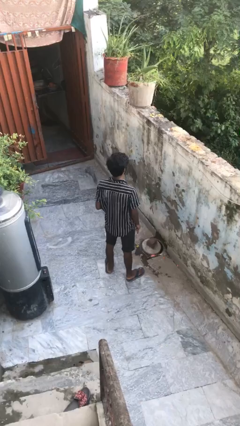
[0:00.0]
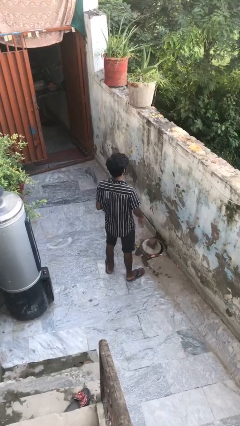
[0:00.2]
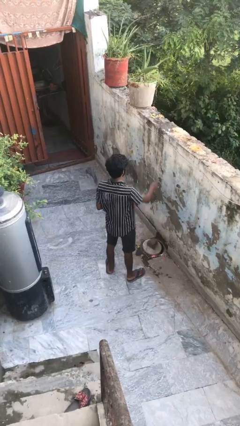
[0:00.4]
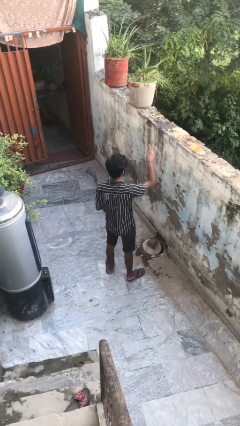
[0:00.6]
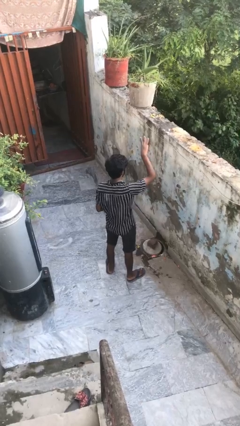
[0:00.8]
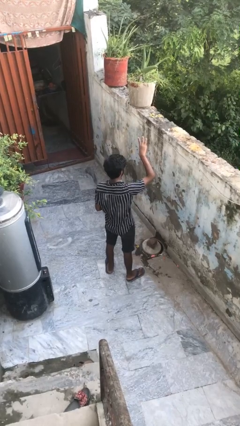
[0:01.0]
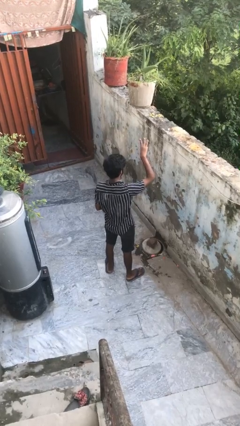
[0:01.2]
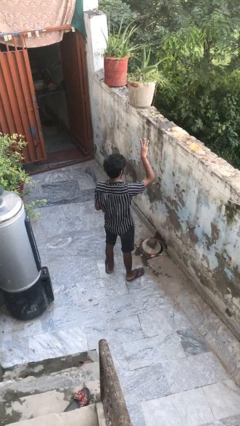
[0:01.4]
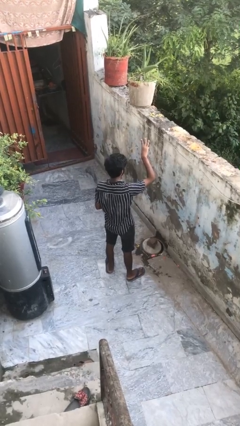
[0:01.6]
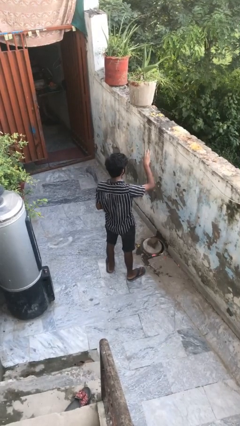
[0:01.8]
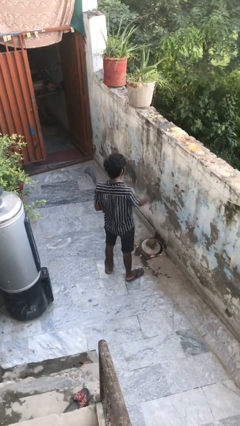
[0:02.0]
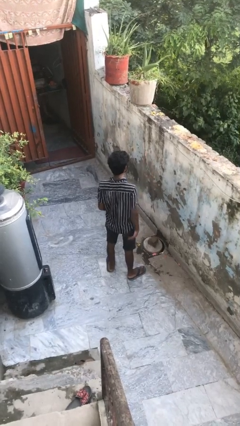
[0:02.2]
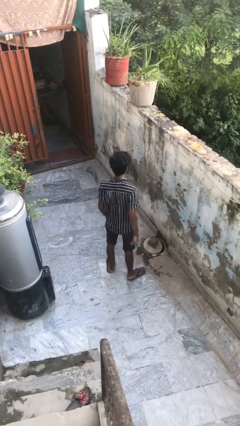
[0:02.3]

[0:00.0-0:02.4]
person gestures number three

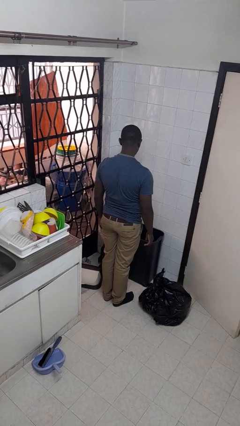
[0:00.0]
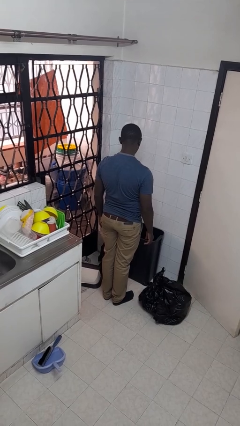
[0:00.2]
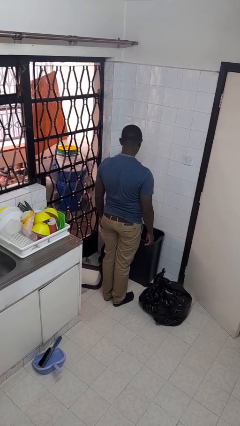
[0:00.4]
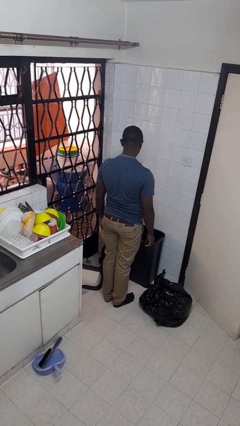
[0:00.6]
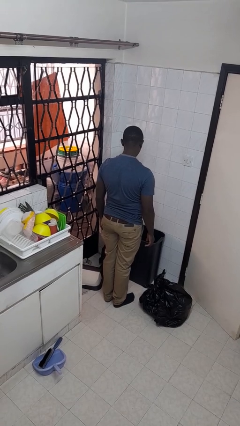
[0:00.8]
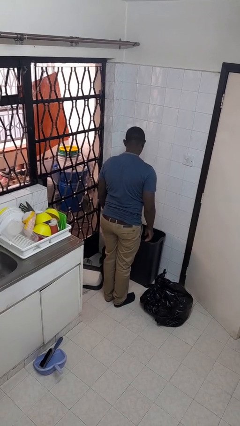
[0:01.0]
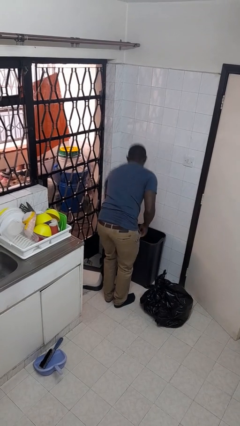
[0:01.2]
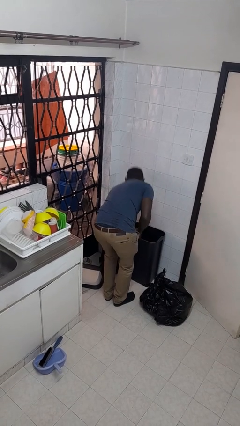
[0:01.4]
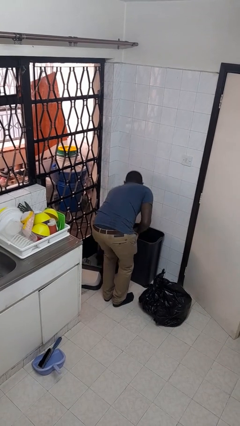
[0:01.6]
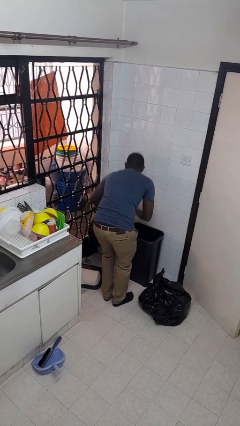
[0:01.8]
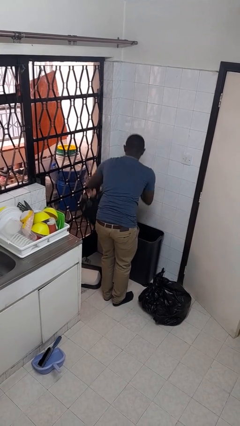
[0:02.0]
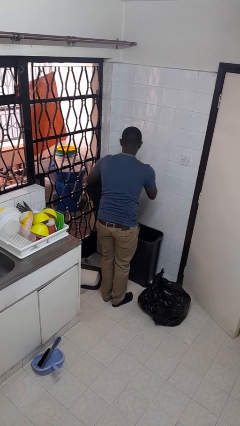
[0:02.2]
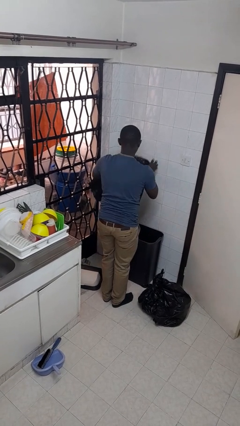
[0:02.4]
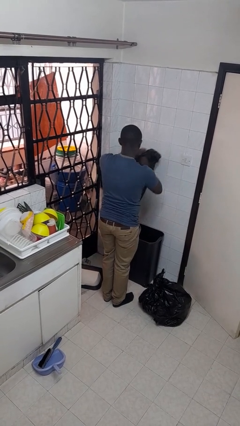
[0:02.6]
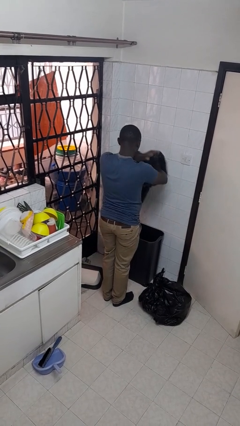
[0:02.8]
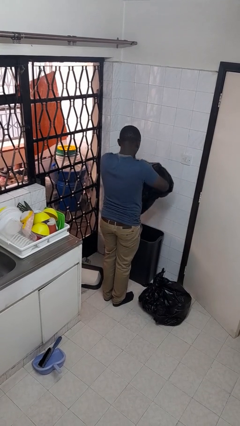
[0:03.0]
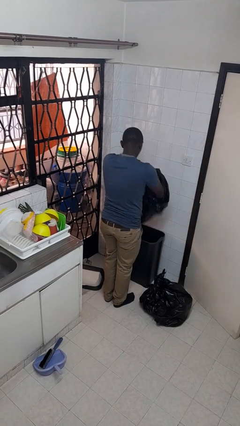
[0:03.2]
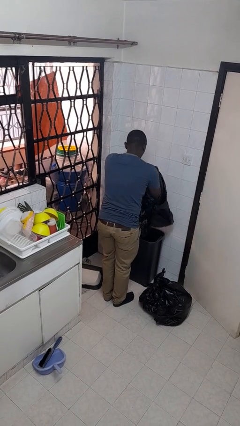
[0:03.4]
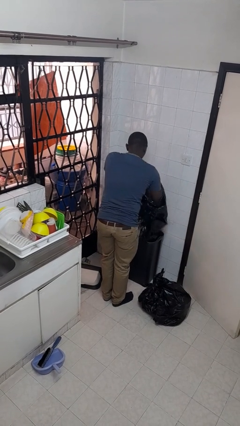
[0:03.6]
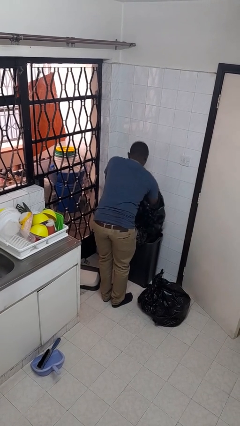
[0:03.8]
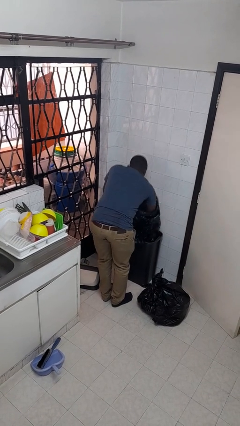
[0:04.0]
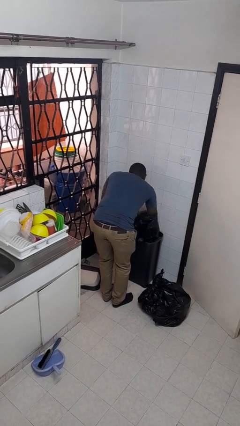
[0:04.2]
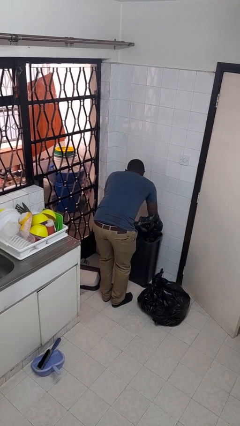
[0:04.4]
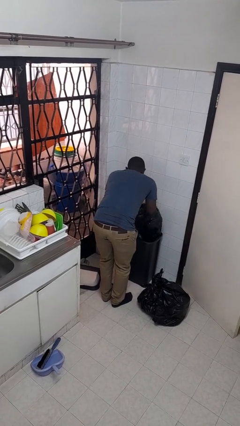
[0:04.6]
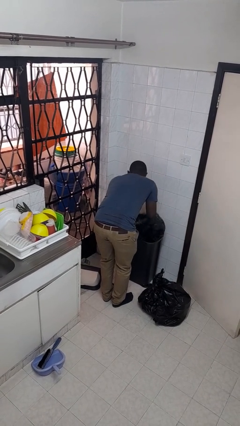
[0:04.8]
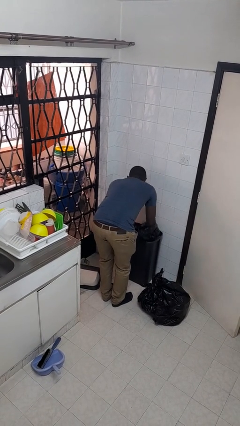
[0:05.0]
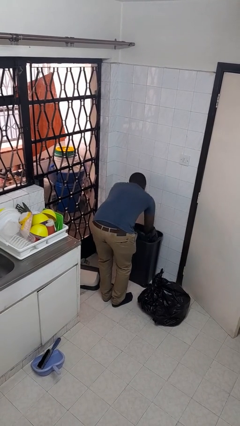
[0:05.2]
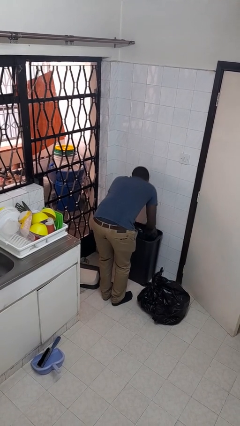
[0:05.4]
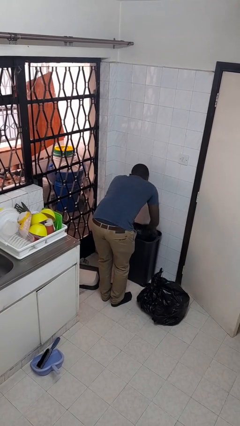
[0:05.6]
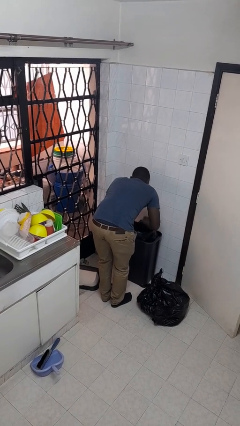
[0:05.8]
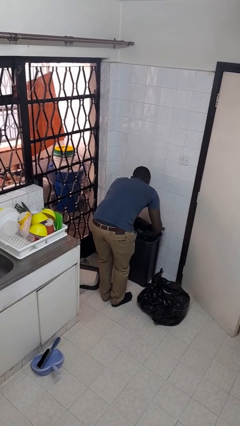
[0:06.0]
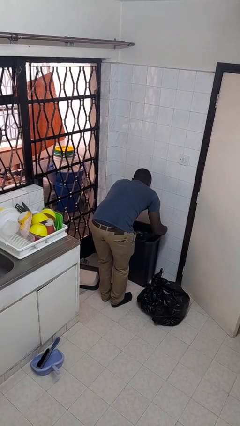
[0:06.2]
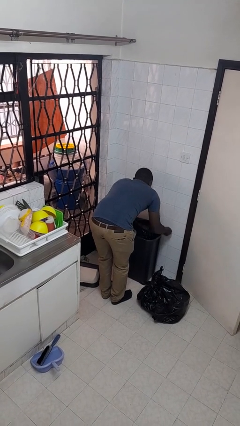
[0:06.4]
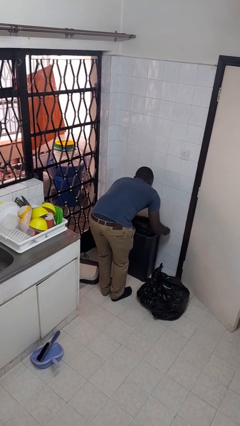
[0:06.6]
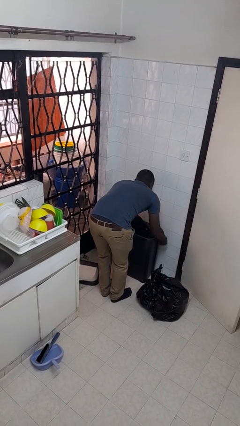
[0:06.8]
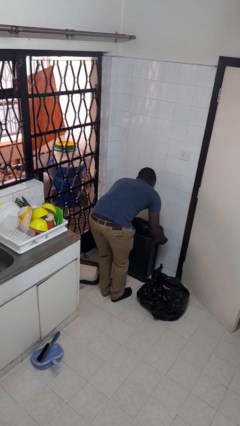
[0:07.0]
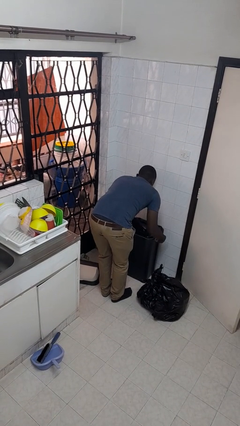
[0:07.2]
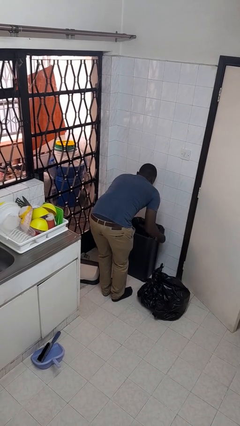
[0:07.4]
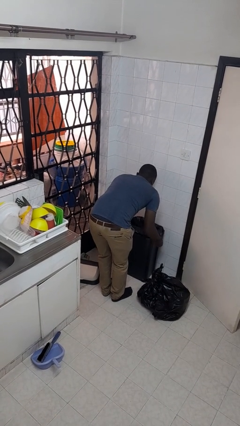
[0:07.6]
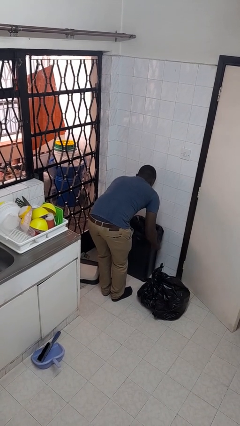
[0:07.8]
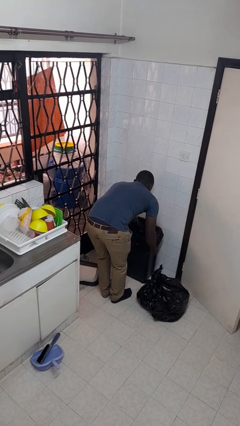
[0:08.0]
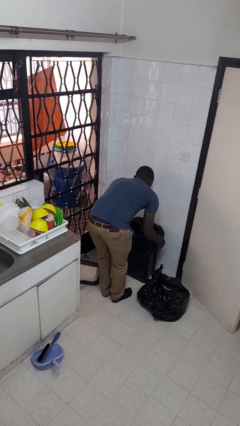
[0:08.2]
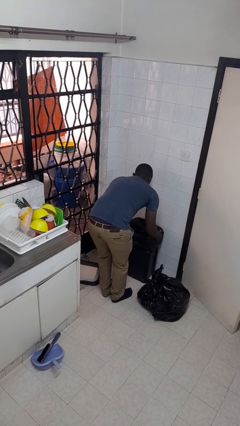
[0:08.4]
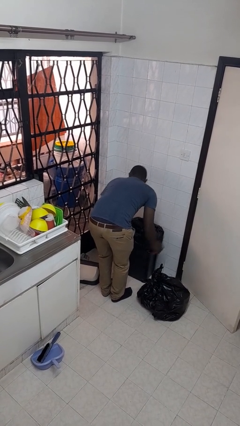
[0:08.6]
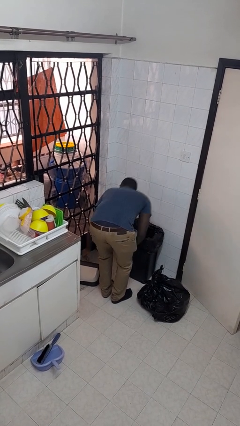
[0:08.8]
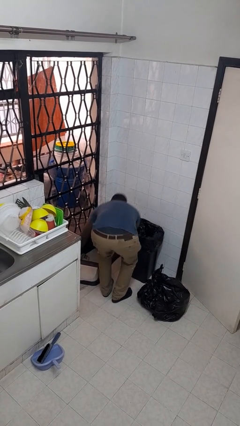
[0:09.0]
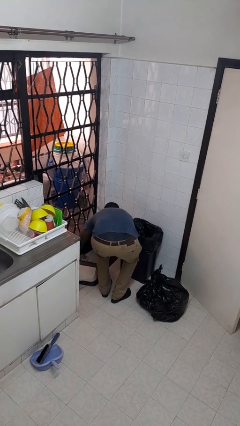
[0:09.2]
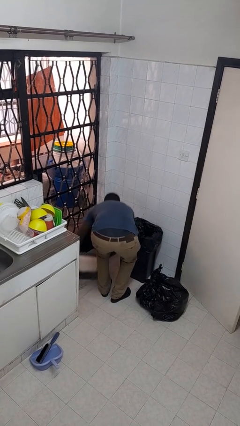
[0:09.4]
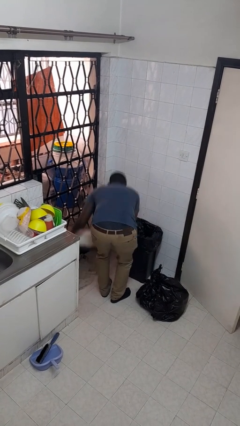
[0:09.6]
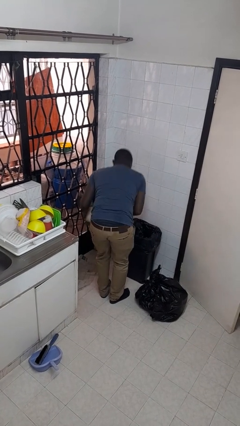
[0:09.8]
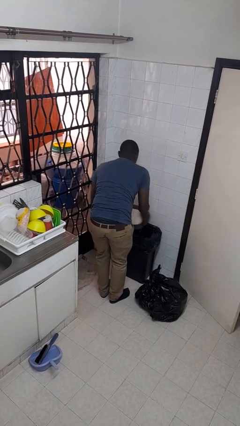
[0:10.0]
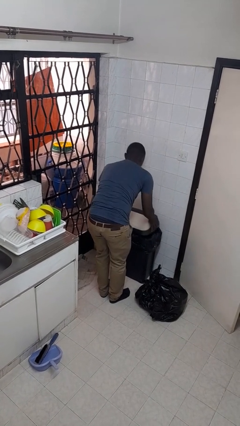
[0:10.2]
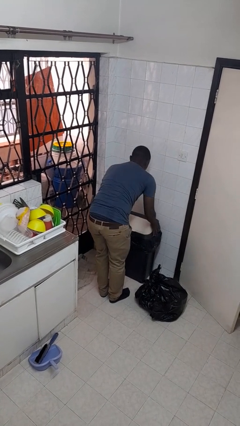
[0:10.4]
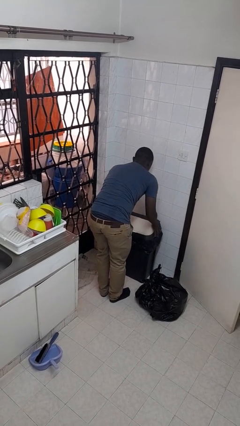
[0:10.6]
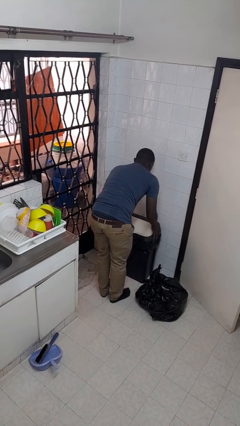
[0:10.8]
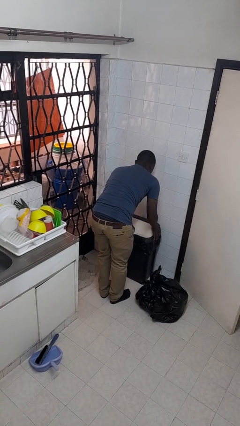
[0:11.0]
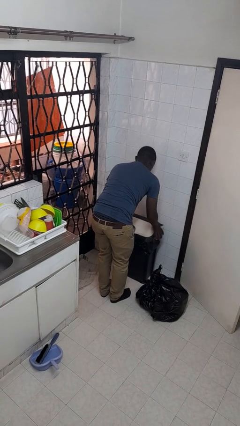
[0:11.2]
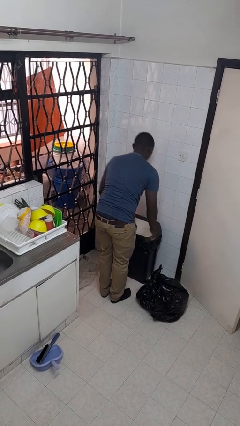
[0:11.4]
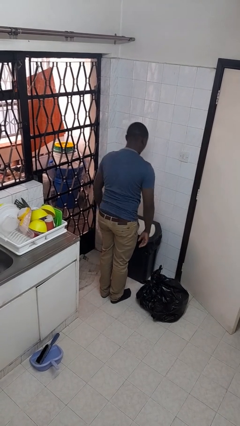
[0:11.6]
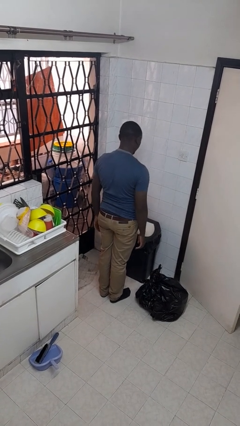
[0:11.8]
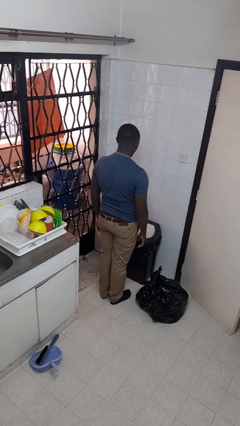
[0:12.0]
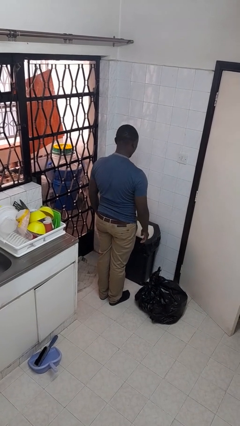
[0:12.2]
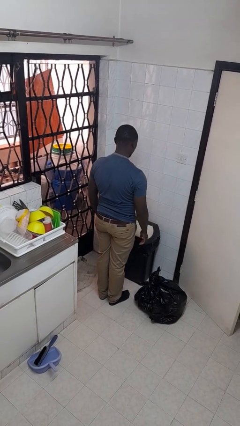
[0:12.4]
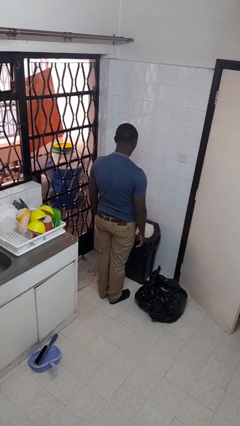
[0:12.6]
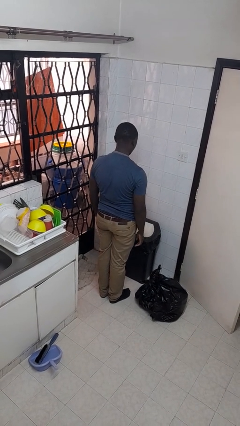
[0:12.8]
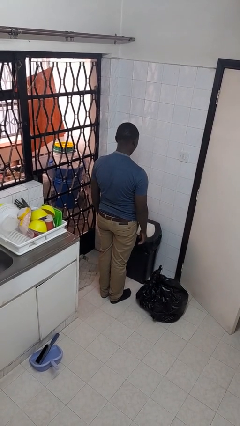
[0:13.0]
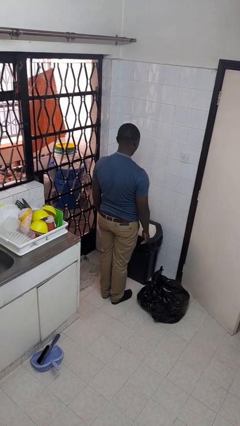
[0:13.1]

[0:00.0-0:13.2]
person inserts trashbag into trashcan

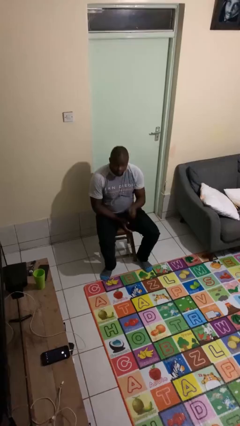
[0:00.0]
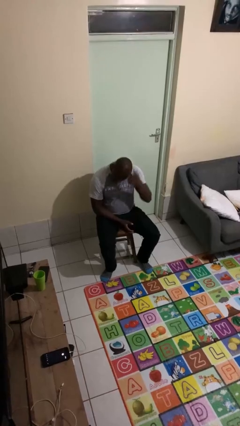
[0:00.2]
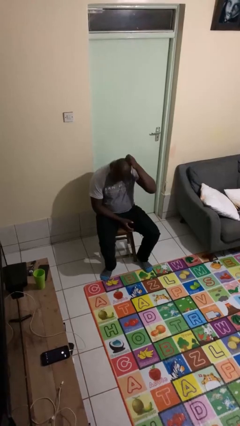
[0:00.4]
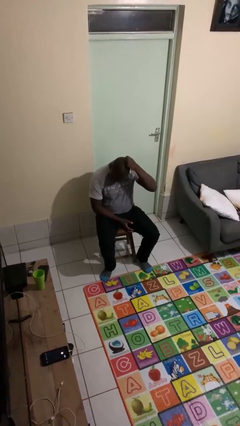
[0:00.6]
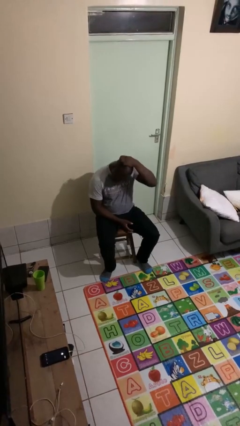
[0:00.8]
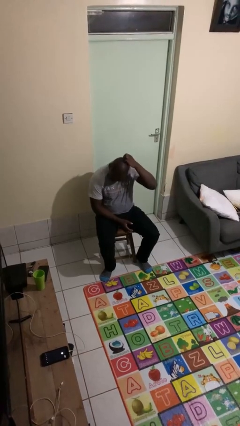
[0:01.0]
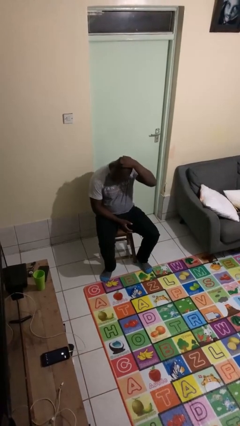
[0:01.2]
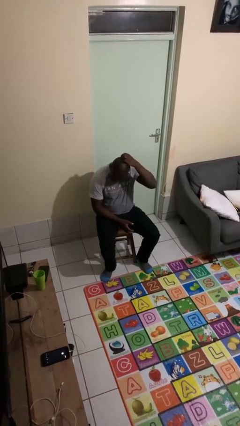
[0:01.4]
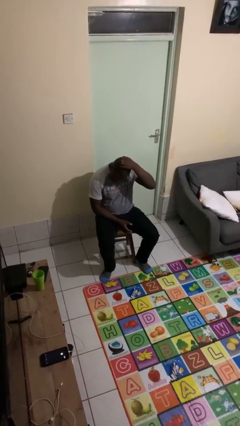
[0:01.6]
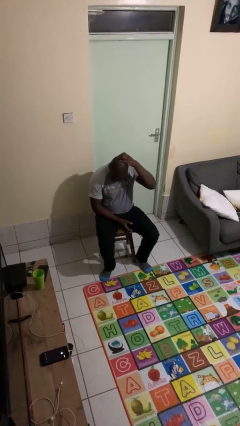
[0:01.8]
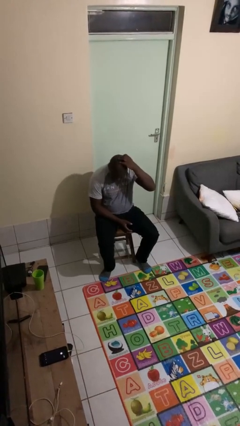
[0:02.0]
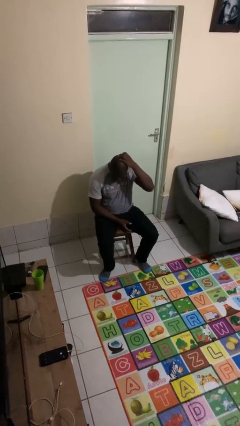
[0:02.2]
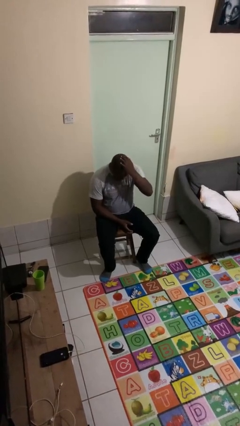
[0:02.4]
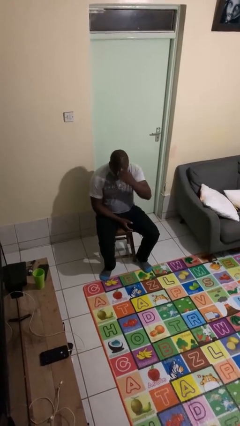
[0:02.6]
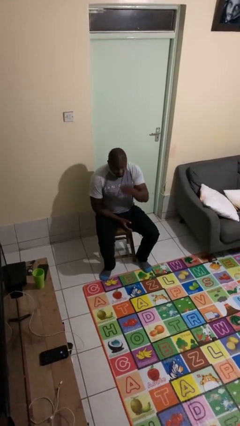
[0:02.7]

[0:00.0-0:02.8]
person scratches face
